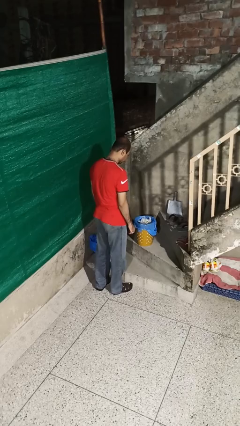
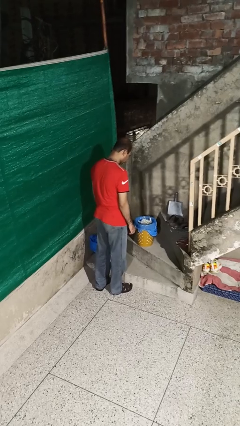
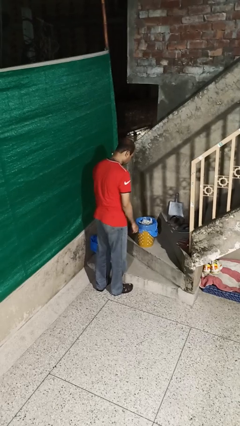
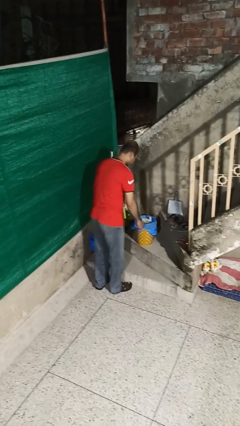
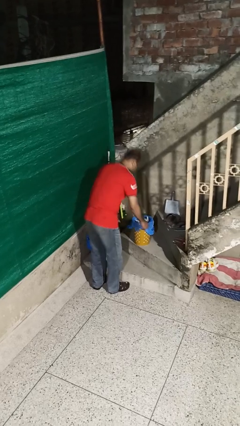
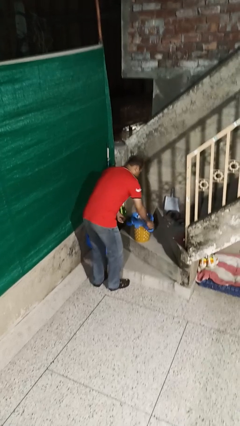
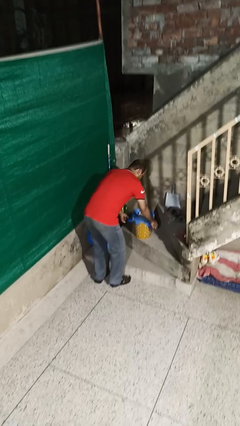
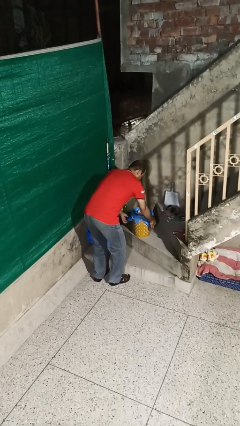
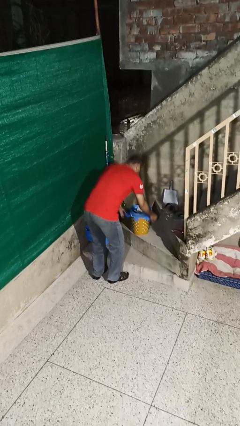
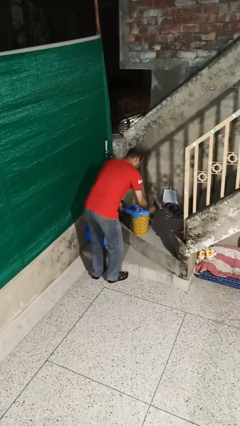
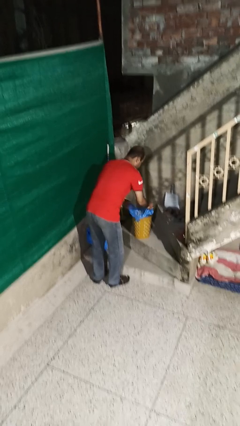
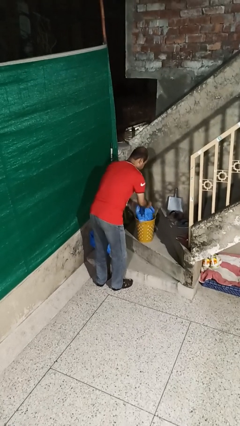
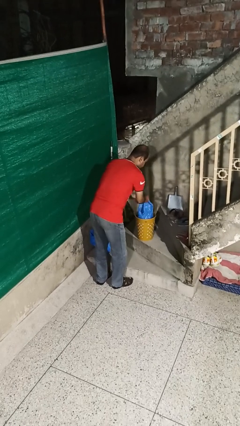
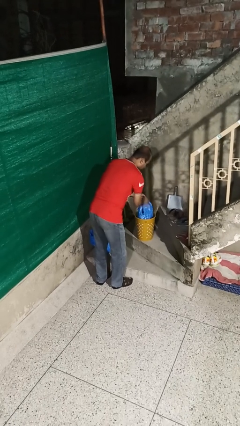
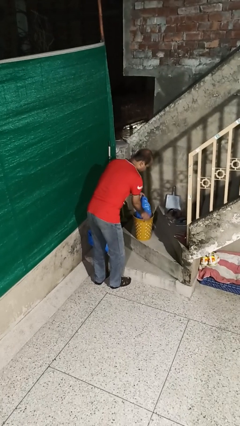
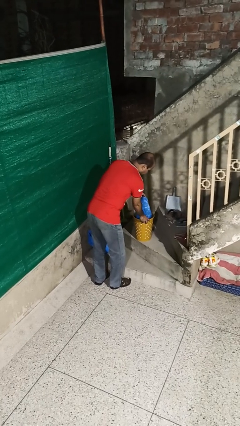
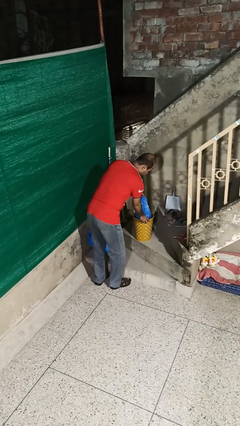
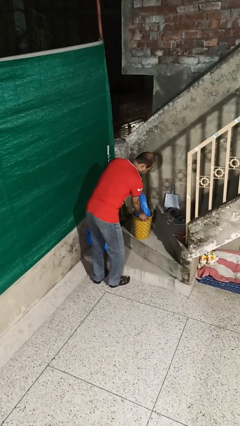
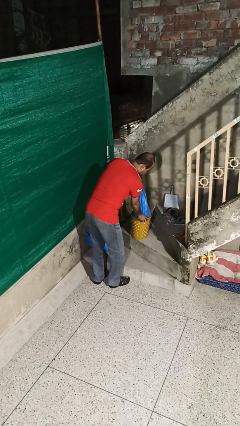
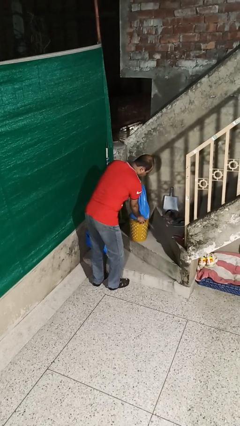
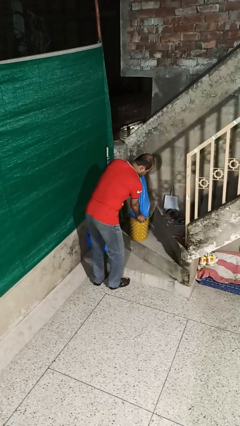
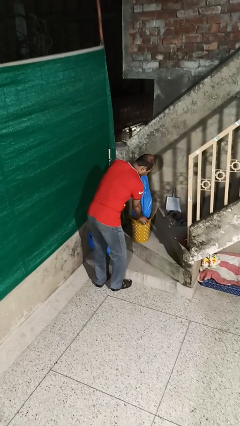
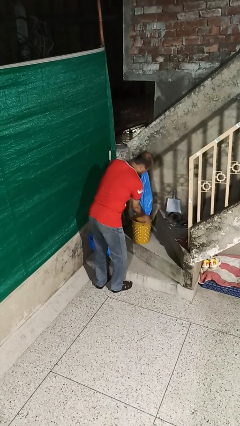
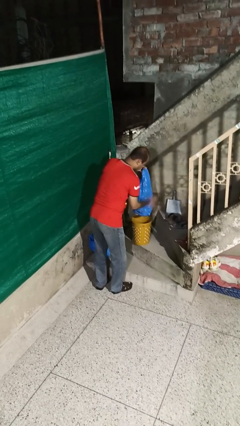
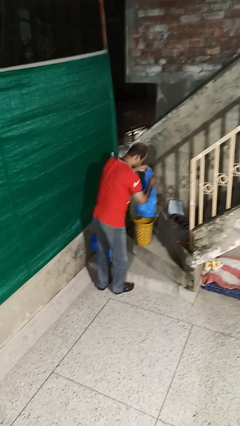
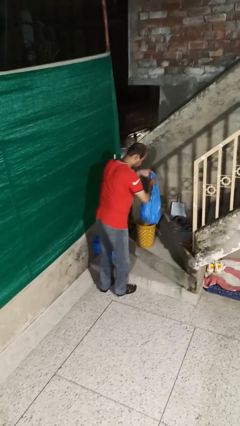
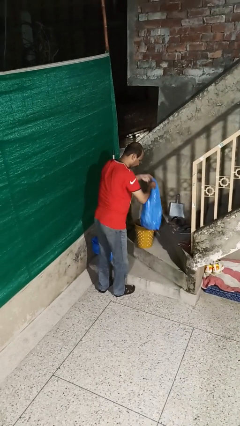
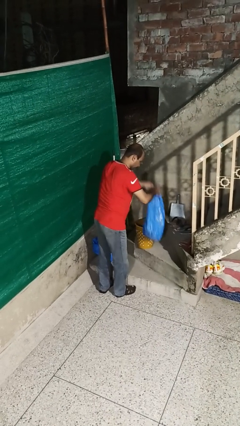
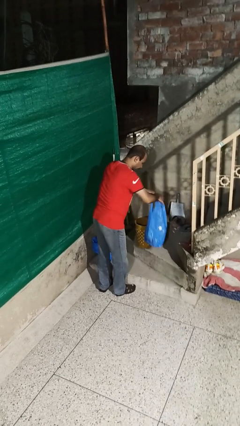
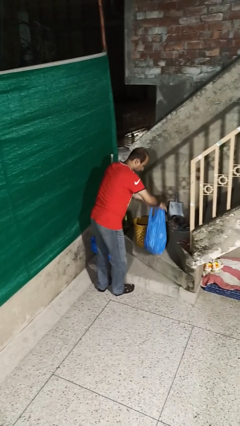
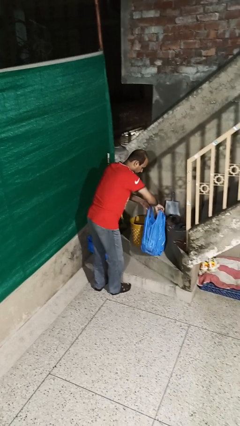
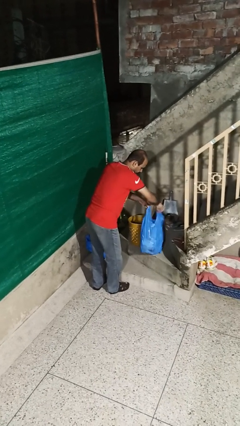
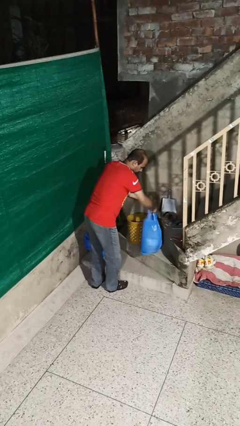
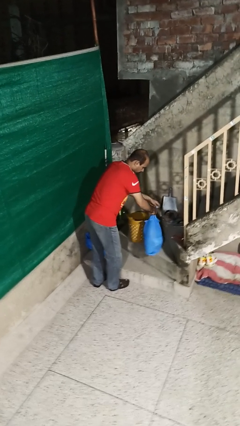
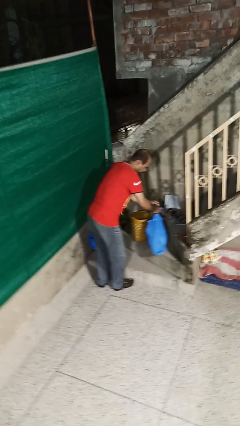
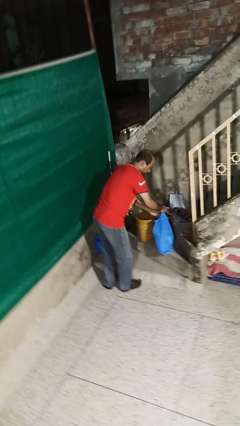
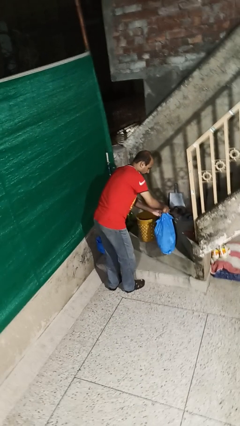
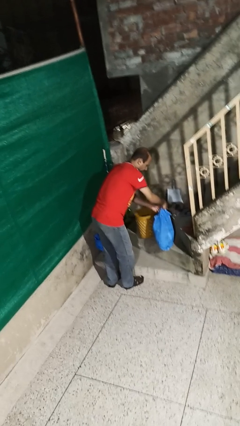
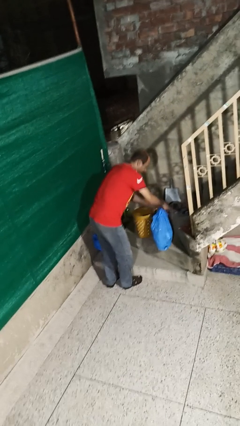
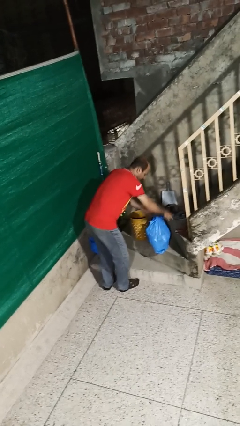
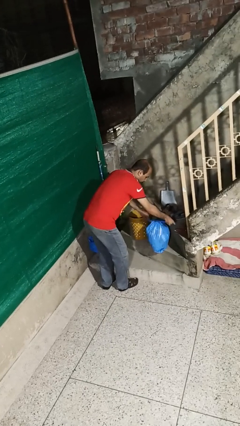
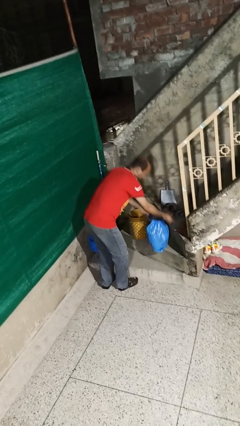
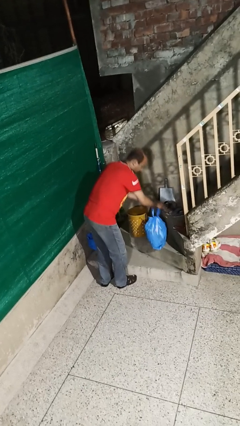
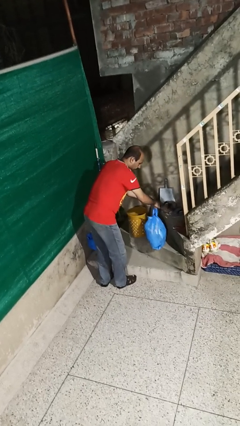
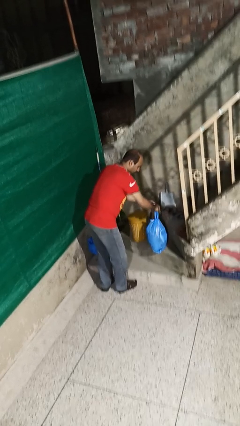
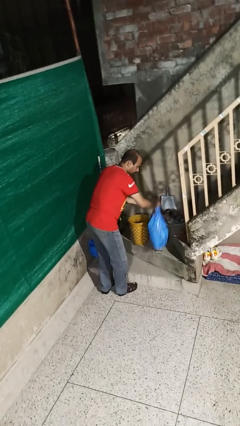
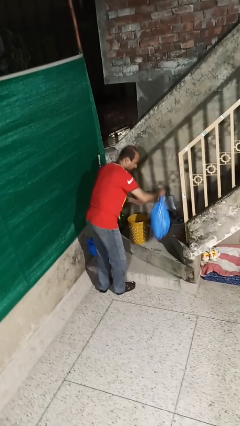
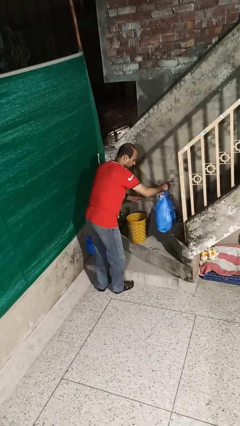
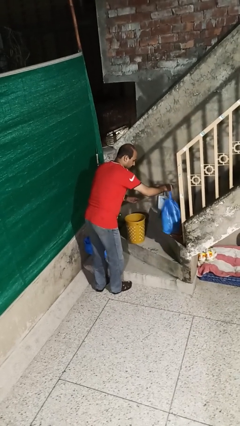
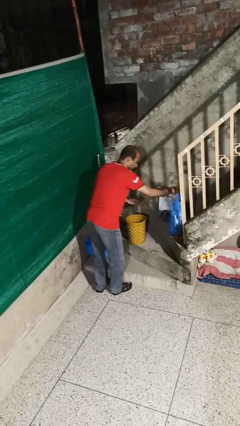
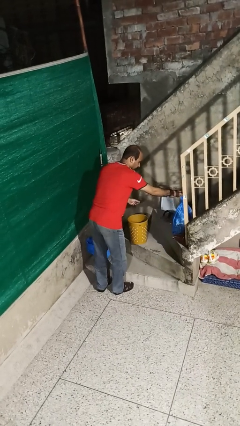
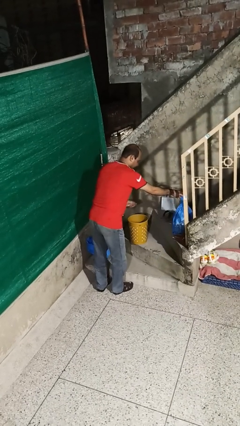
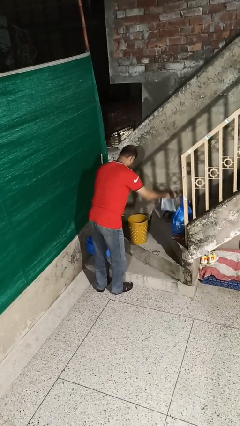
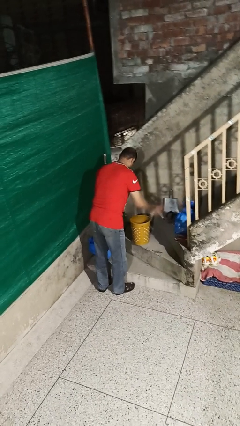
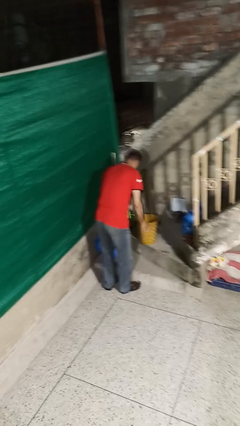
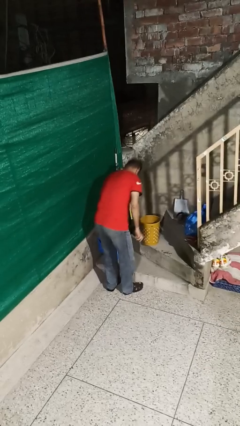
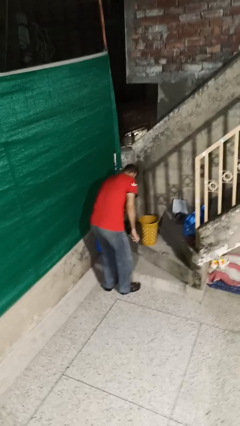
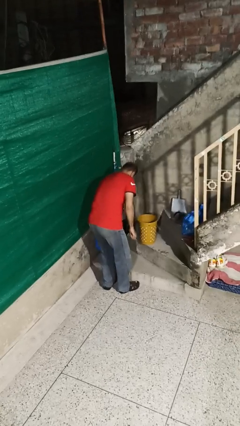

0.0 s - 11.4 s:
person removes trashbag from trashcan

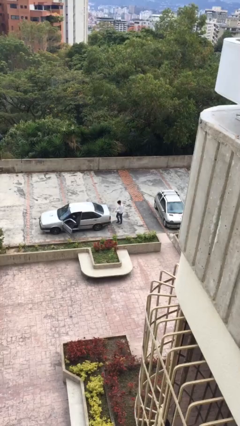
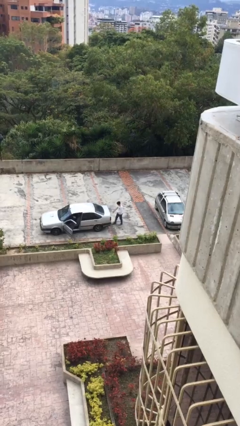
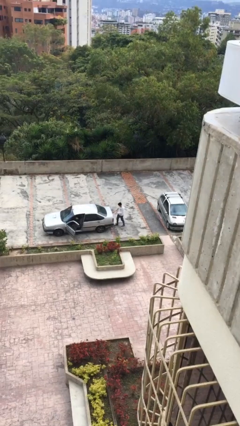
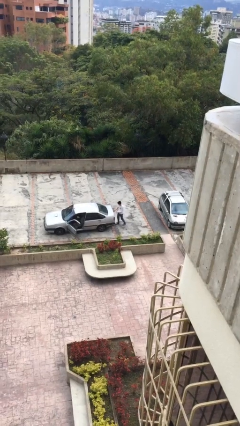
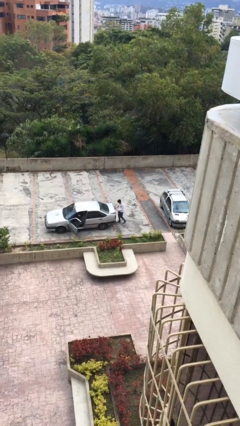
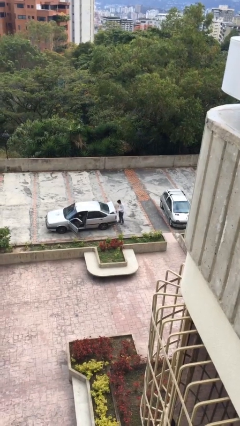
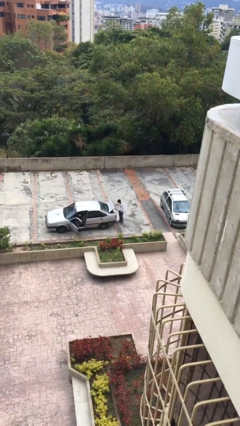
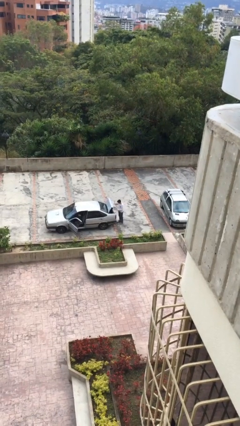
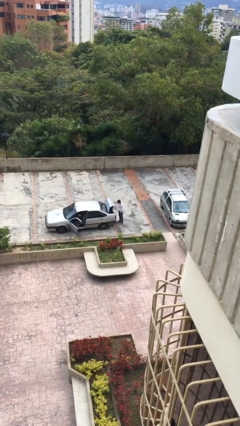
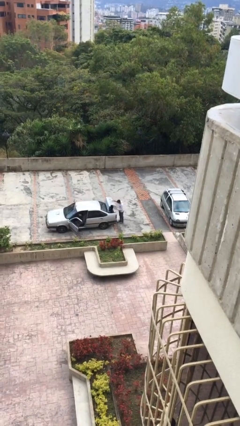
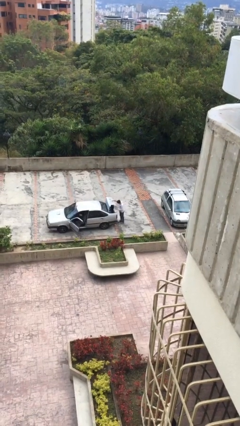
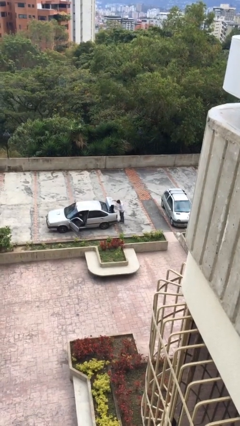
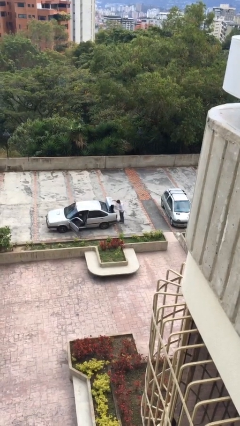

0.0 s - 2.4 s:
person opens car trunk

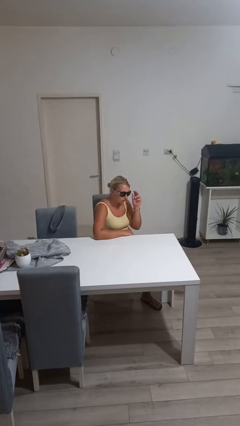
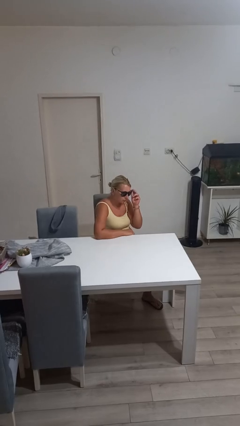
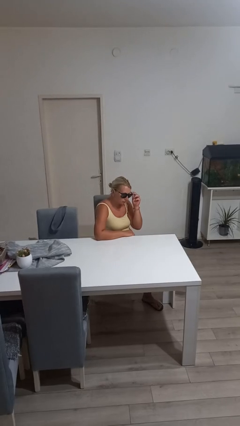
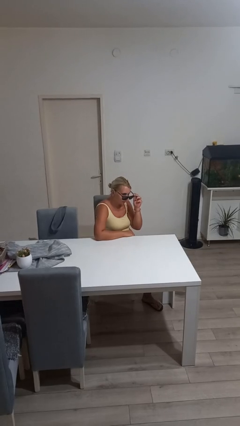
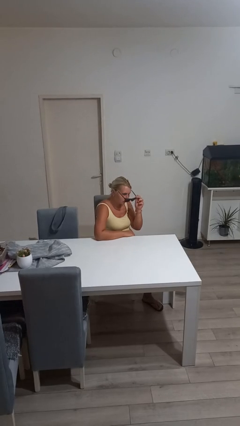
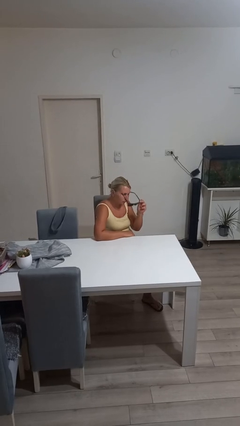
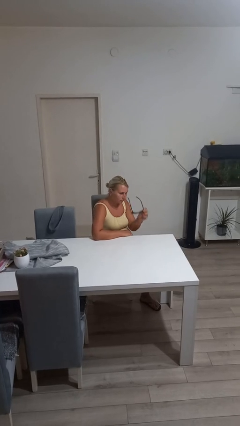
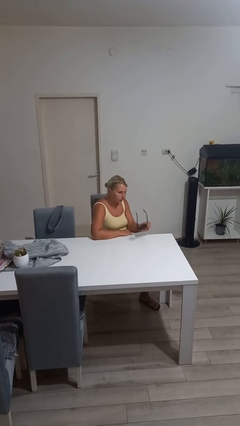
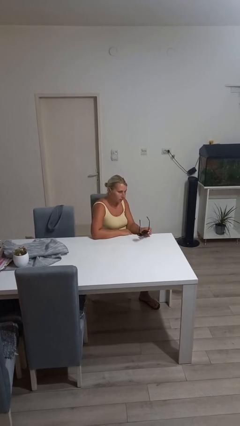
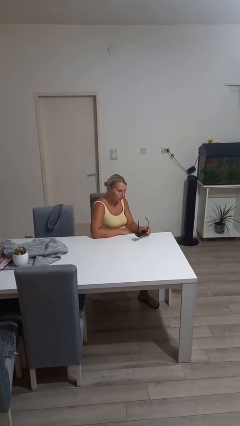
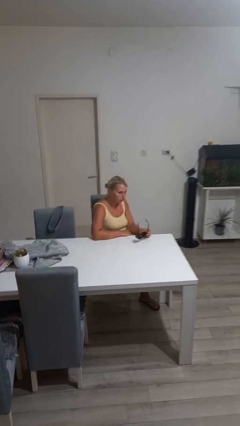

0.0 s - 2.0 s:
person takes off sunglasses

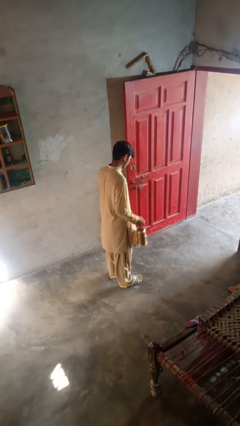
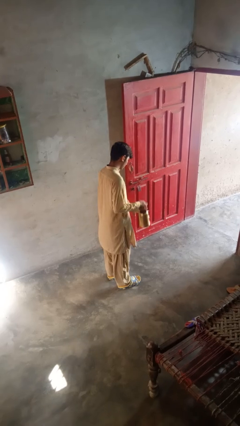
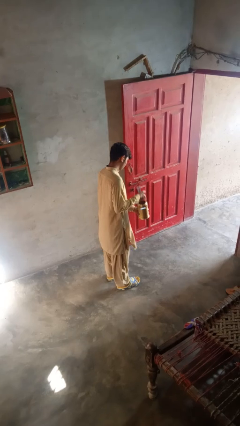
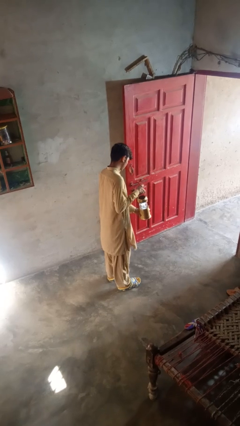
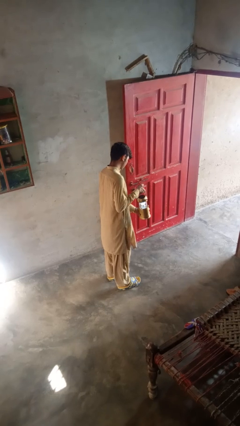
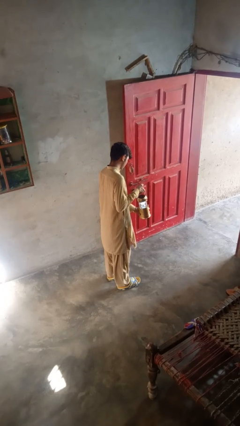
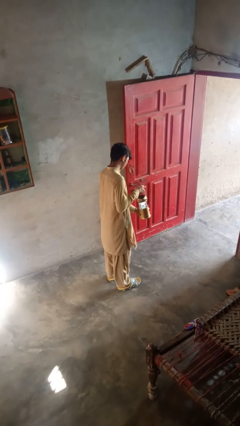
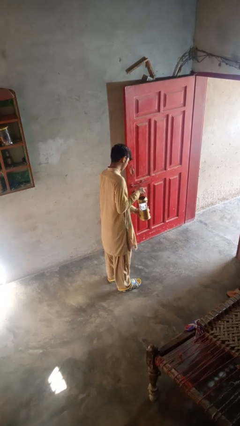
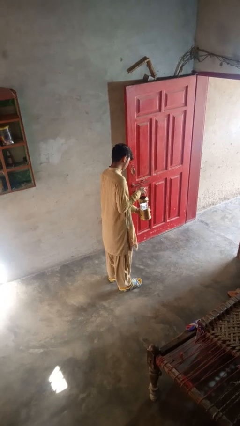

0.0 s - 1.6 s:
person turns on lamp
